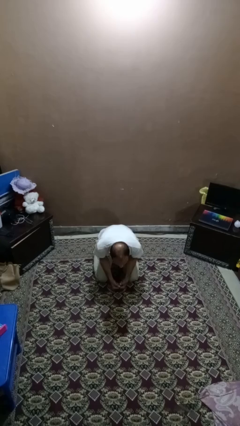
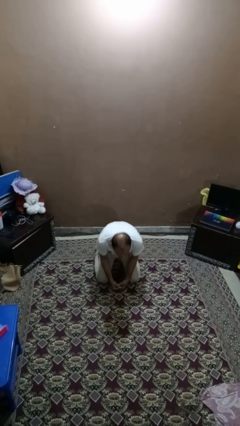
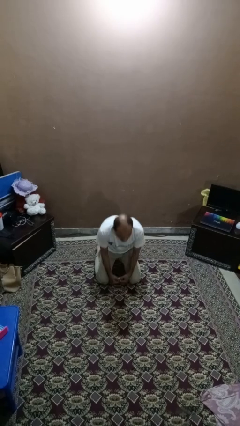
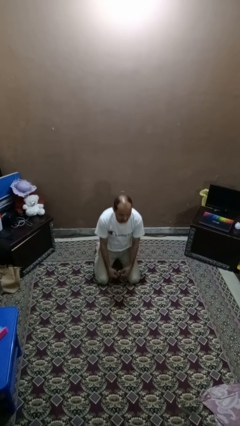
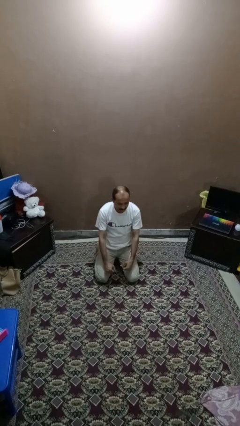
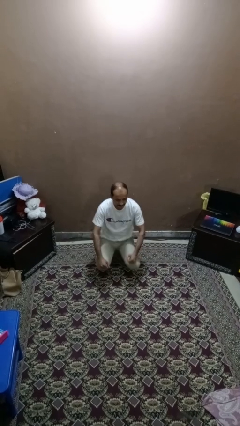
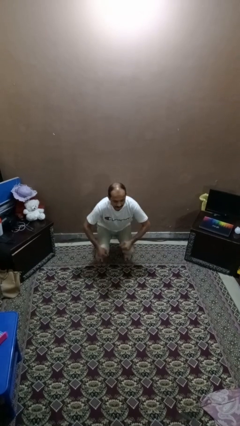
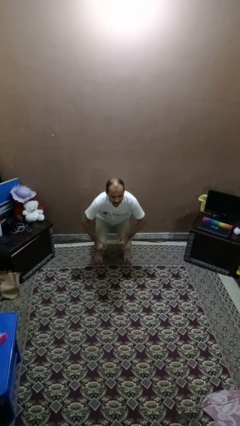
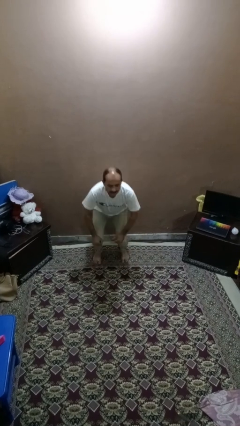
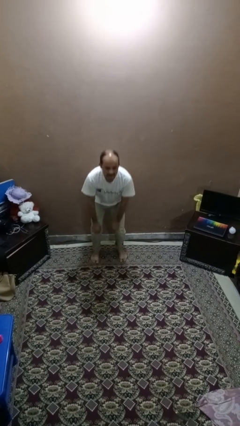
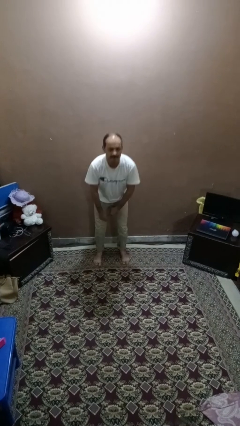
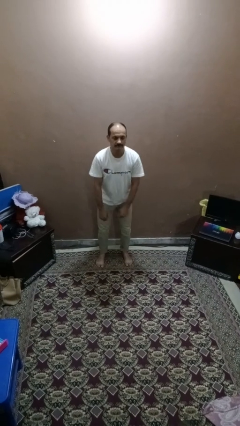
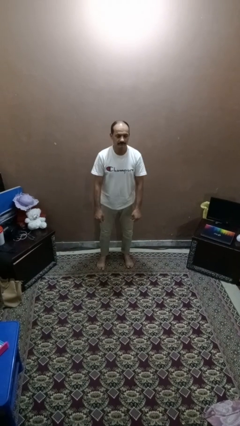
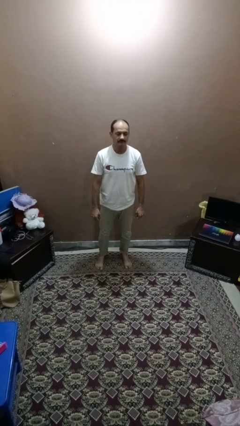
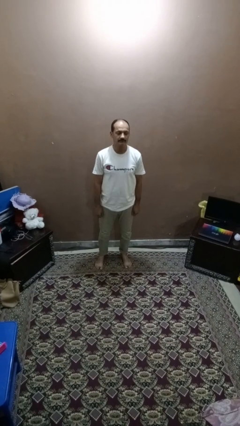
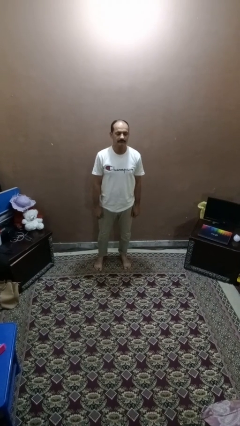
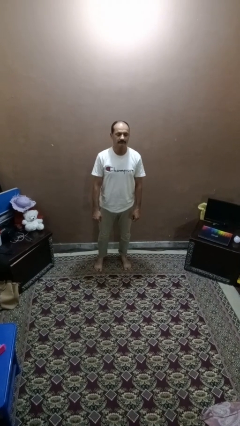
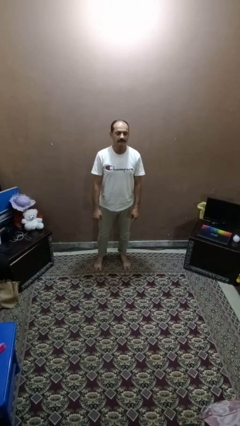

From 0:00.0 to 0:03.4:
person stands up from floor

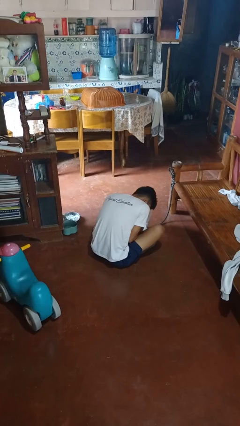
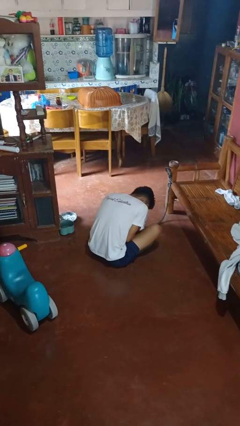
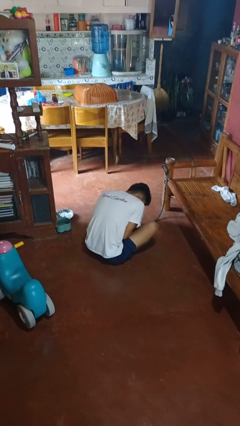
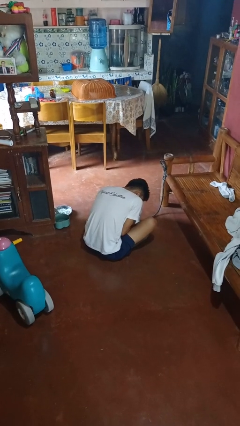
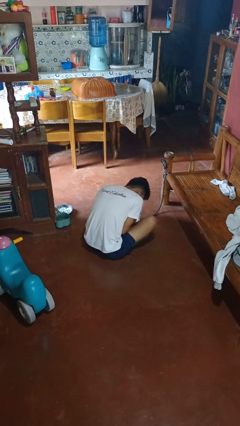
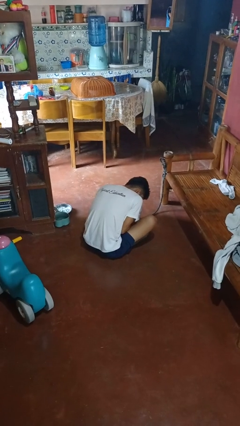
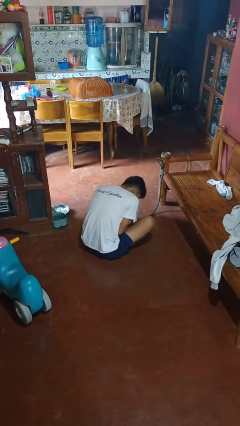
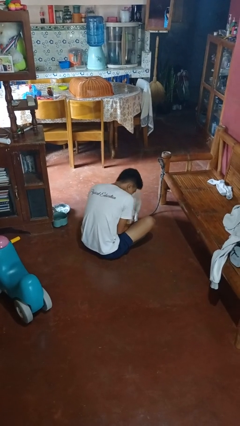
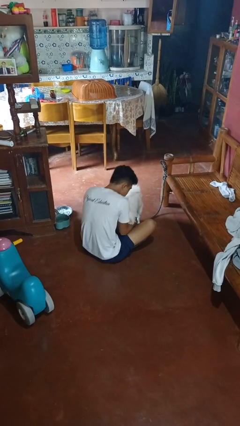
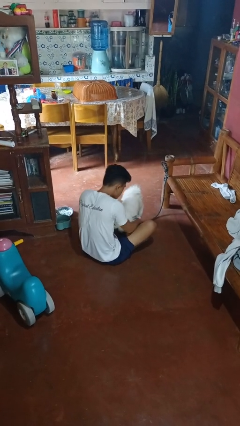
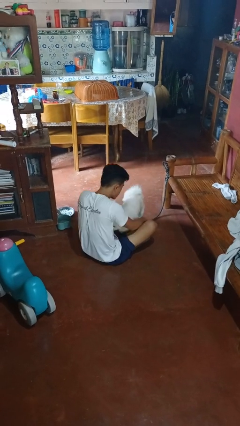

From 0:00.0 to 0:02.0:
person hugs dog

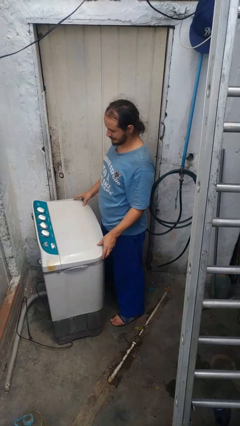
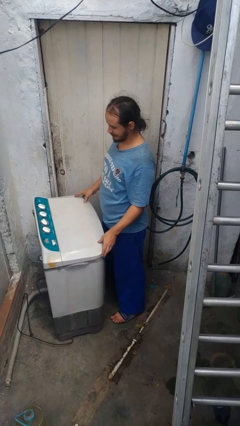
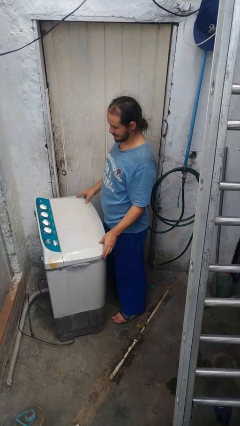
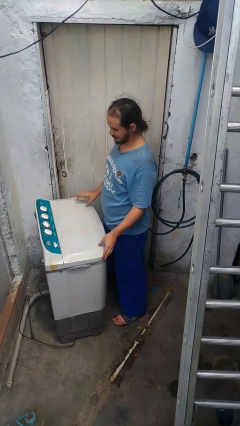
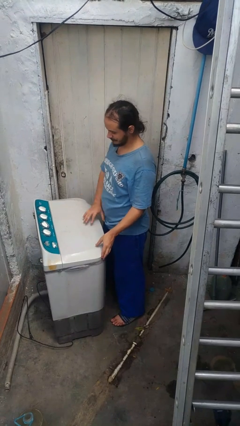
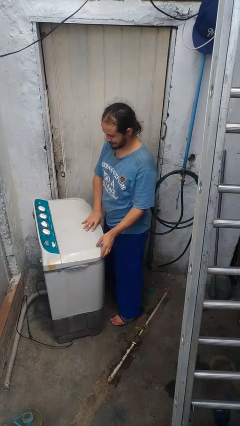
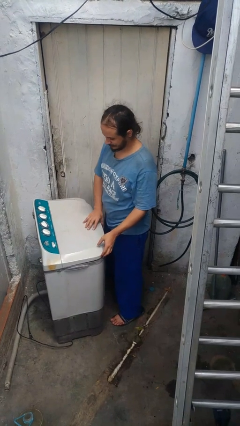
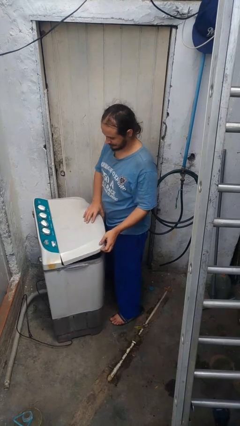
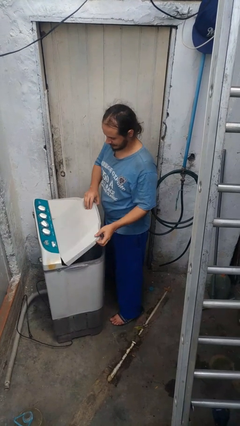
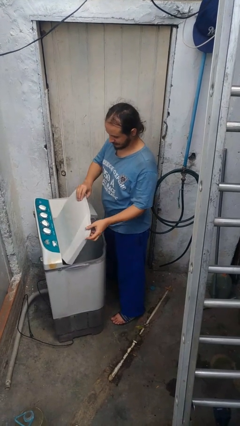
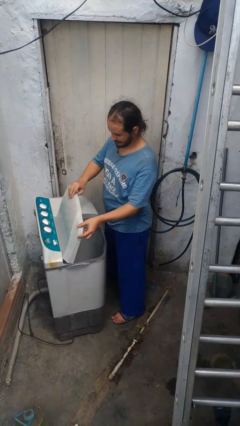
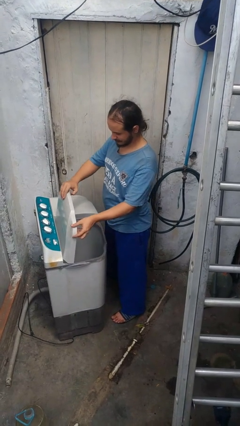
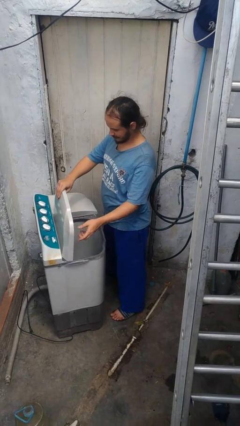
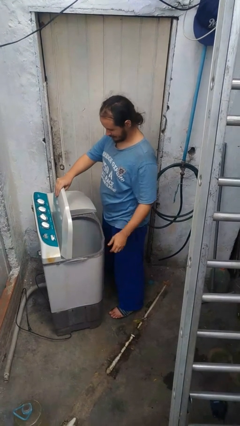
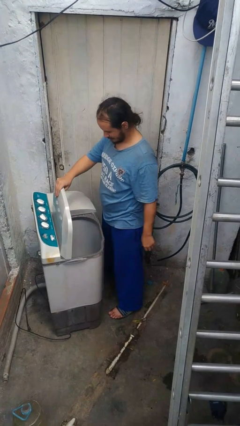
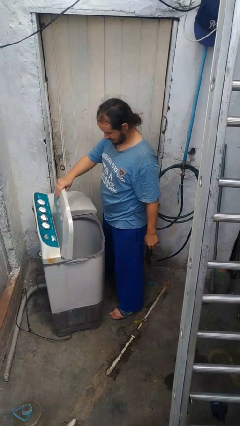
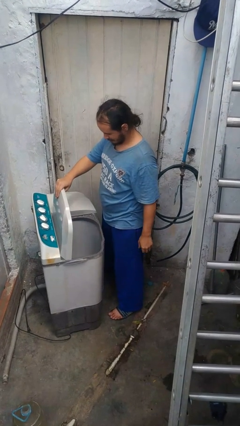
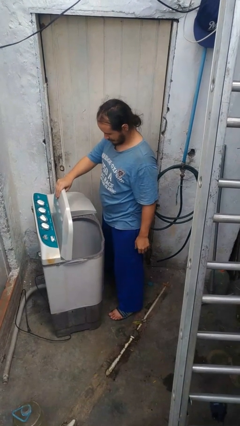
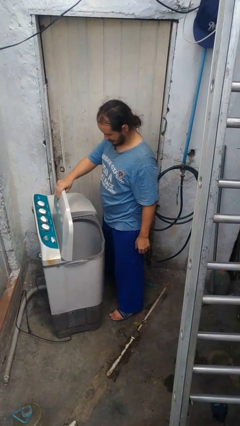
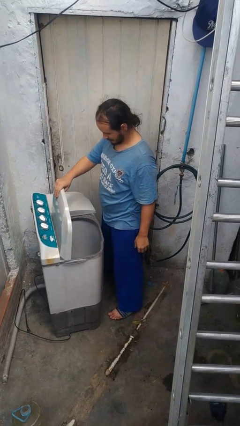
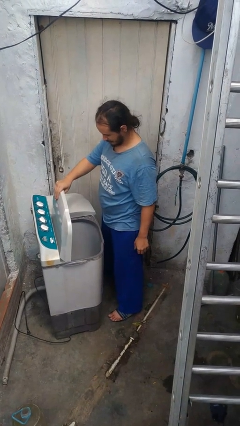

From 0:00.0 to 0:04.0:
person opens clothes washer

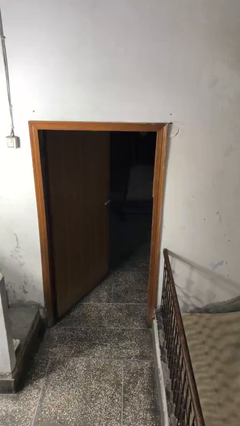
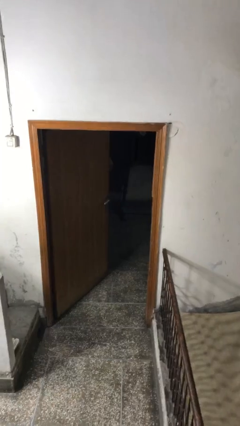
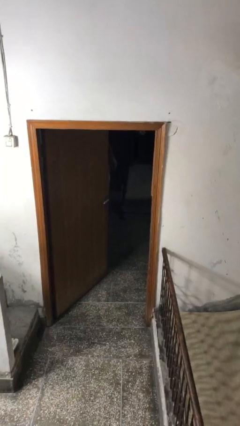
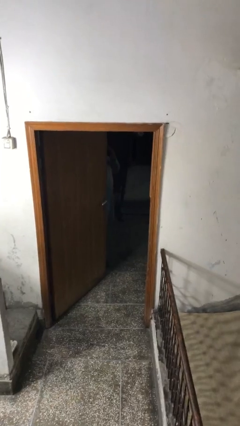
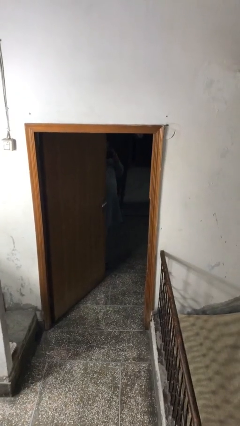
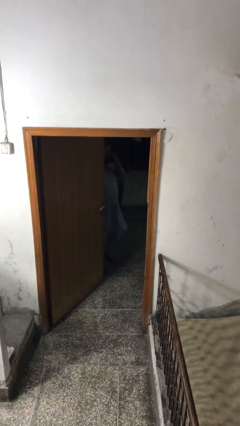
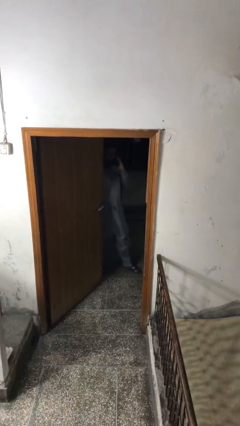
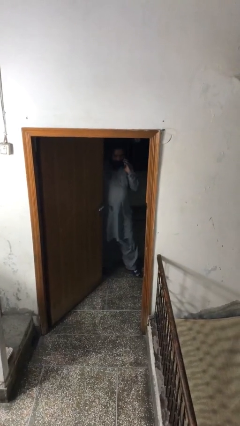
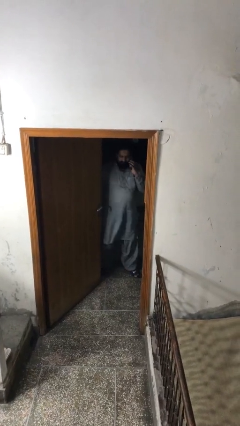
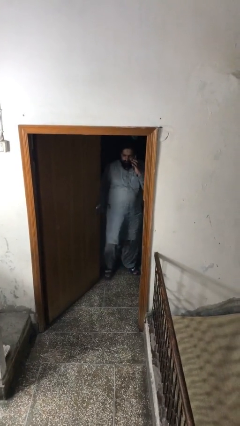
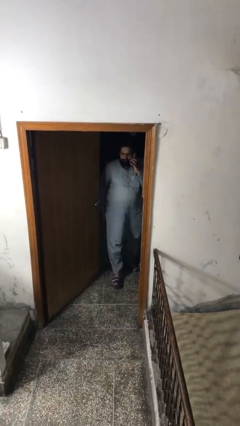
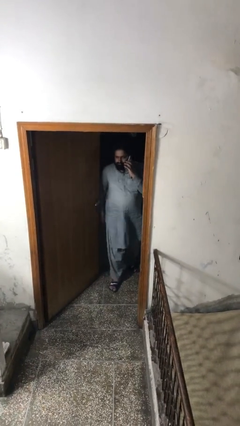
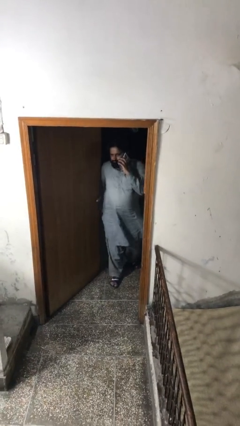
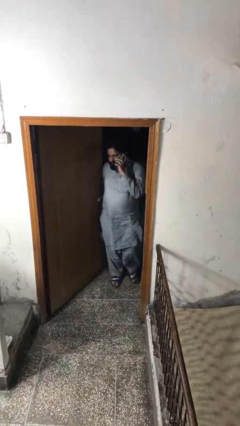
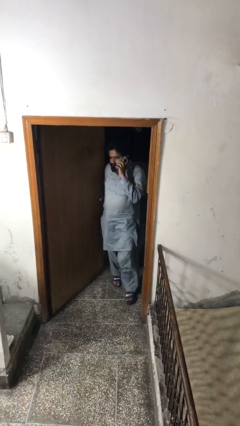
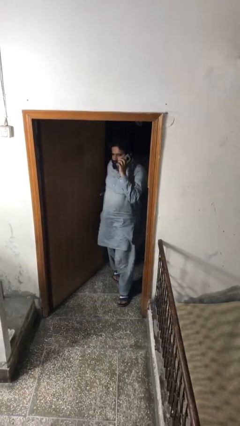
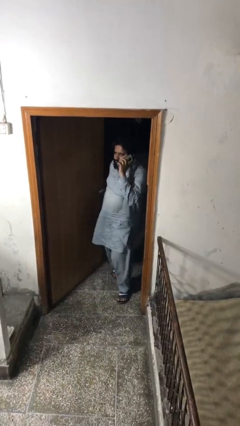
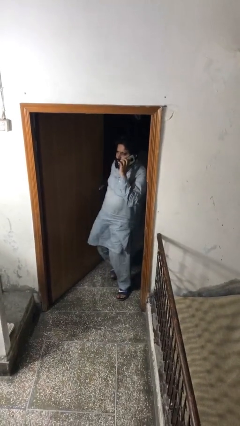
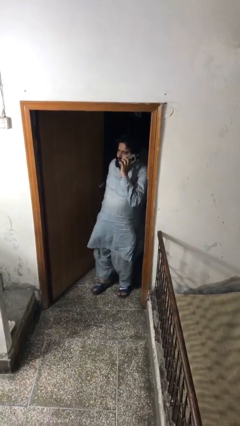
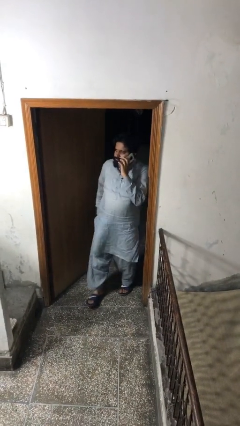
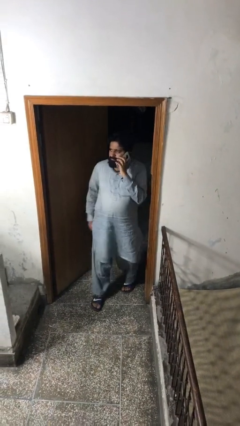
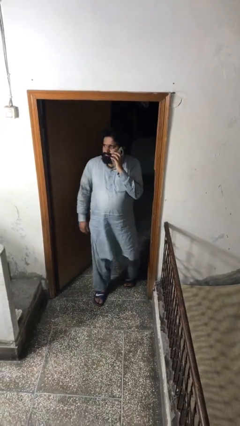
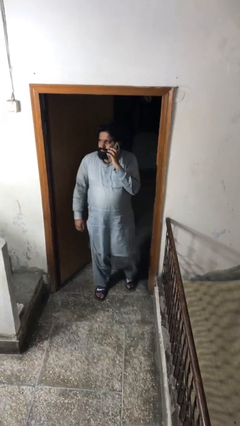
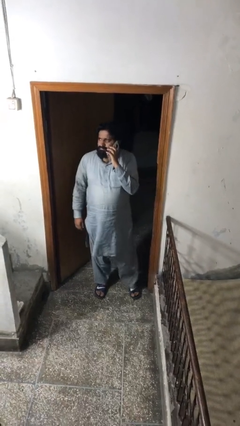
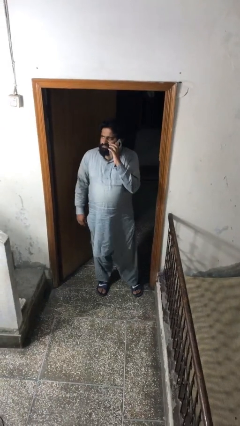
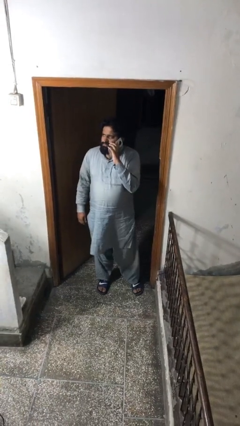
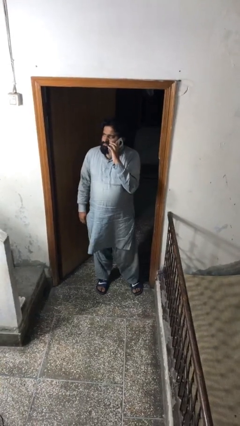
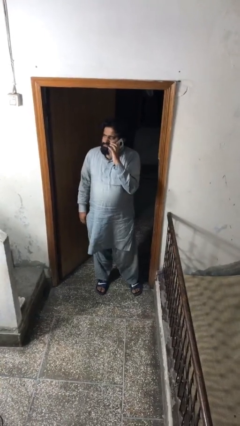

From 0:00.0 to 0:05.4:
person enters scene through structure

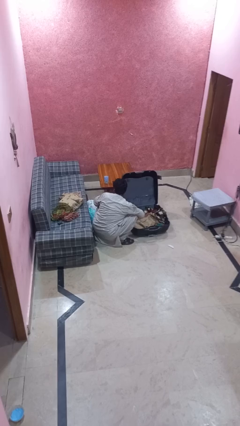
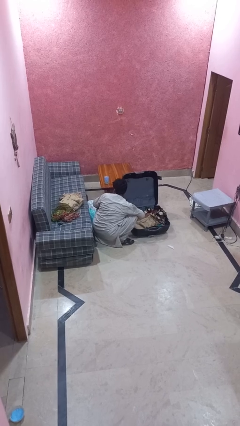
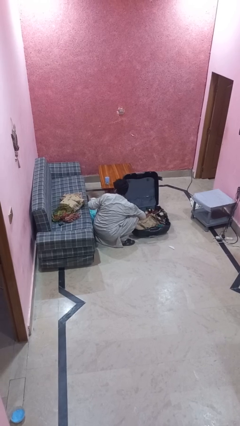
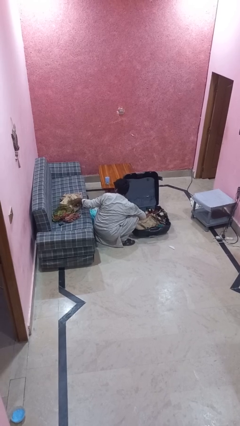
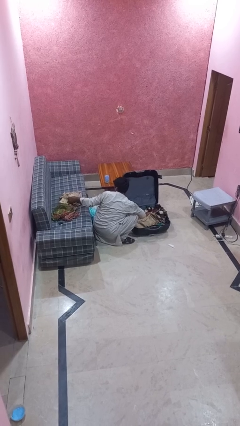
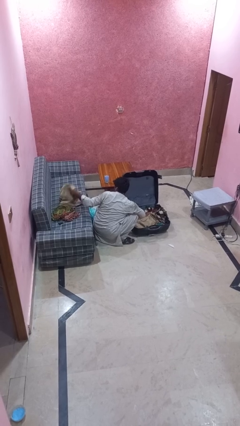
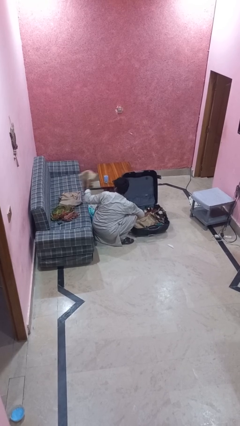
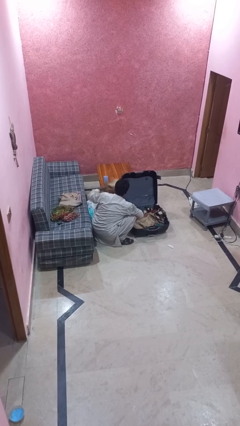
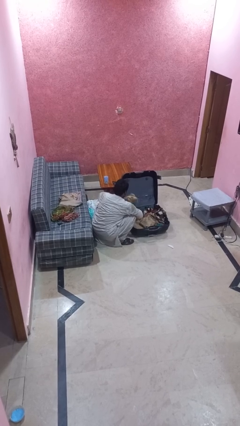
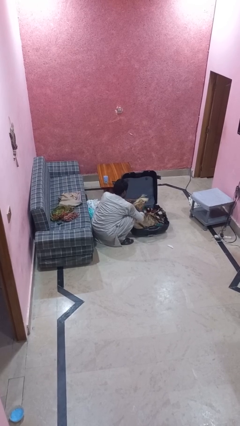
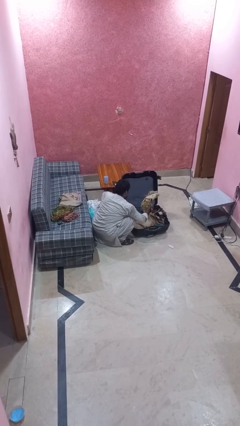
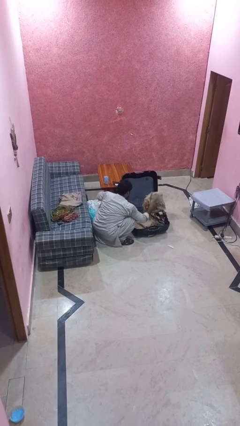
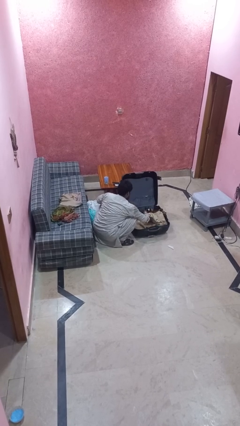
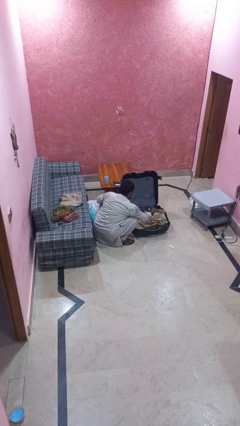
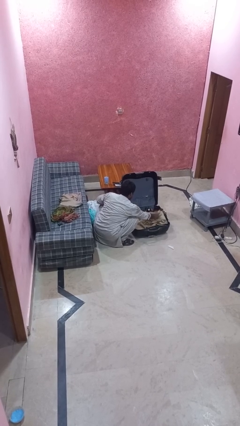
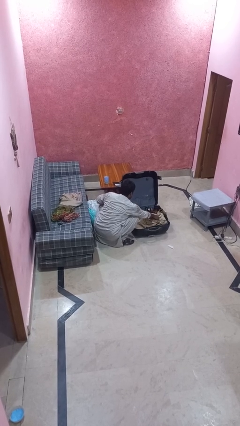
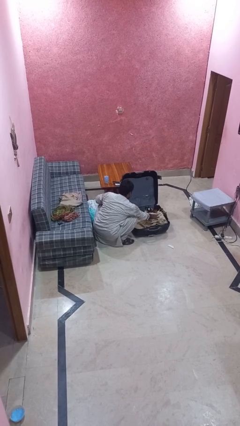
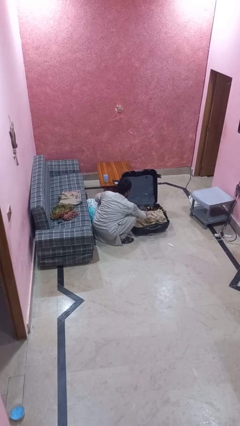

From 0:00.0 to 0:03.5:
person loads clothes into suitcase
